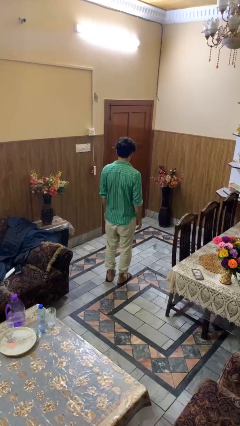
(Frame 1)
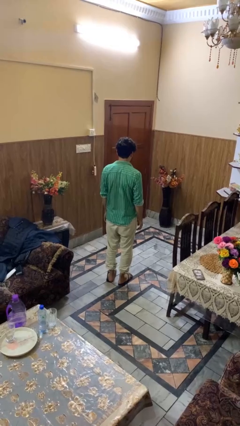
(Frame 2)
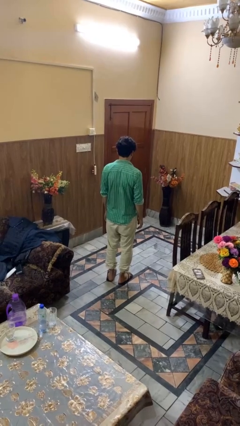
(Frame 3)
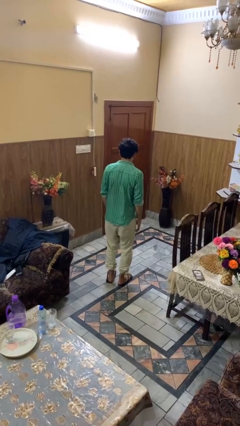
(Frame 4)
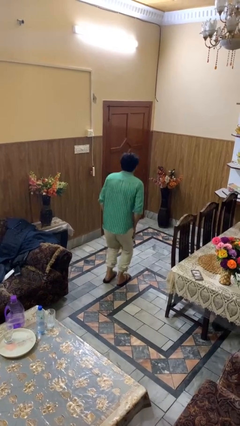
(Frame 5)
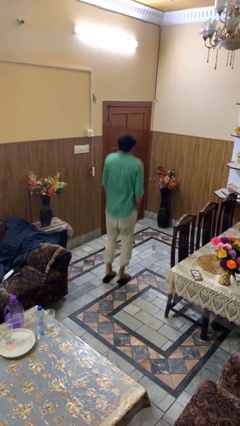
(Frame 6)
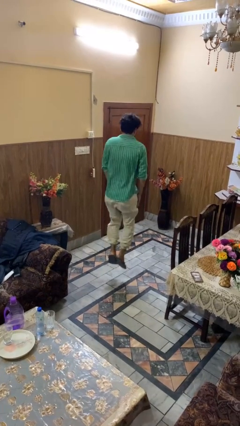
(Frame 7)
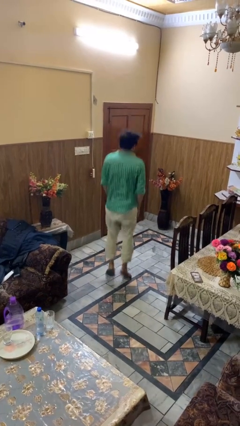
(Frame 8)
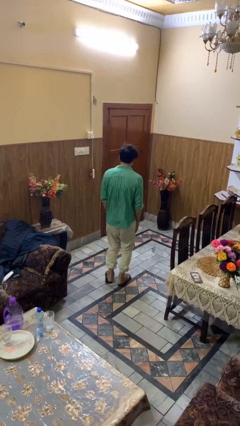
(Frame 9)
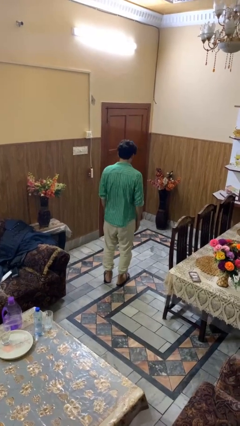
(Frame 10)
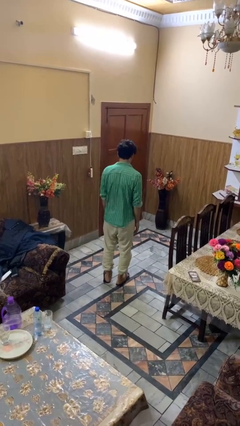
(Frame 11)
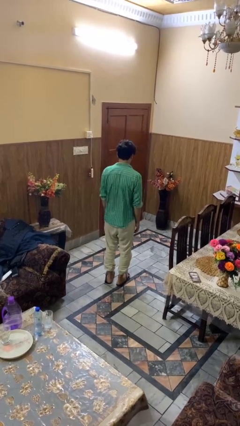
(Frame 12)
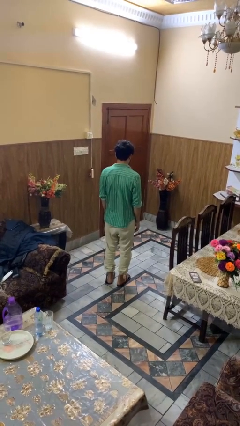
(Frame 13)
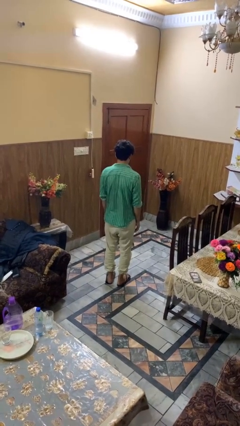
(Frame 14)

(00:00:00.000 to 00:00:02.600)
person jumps

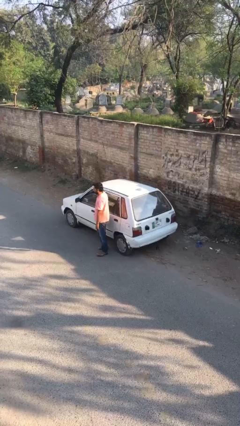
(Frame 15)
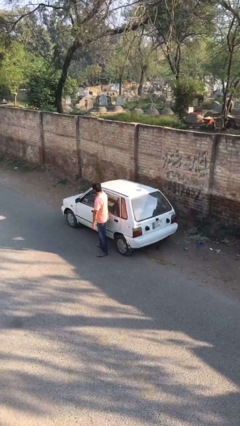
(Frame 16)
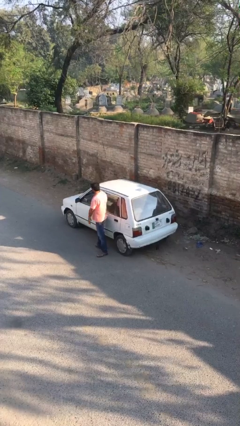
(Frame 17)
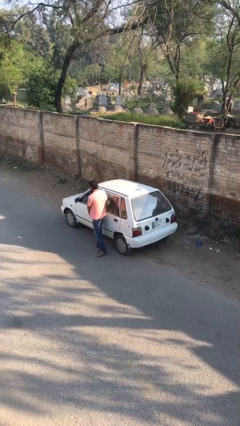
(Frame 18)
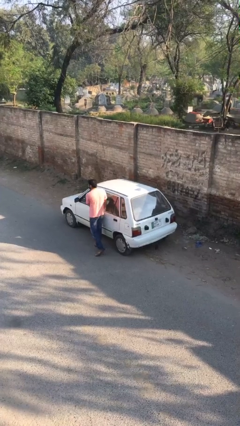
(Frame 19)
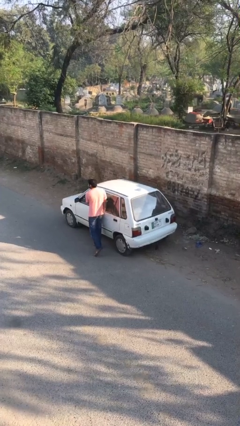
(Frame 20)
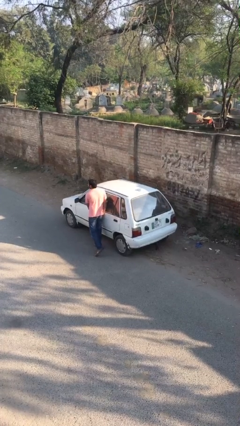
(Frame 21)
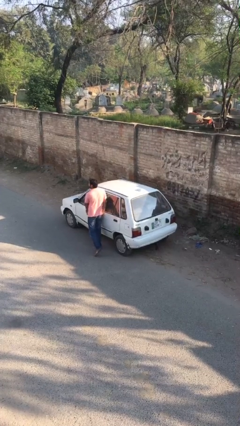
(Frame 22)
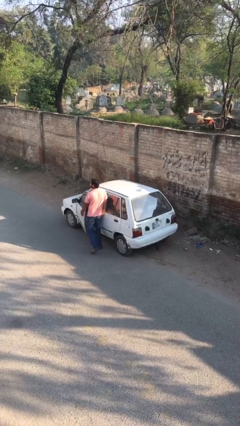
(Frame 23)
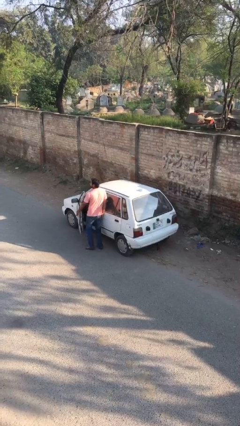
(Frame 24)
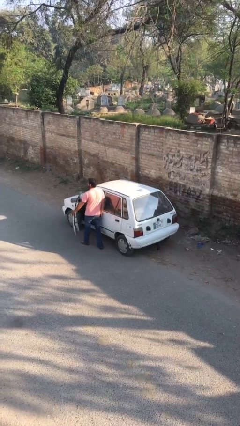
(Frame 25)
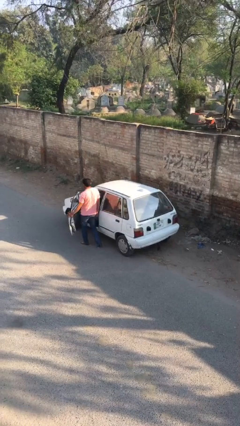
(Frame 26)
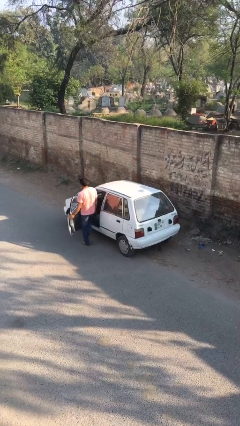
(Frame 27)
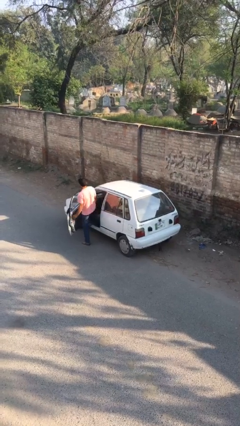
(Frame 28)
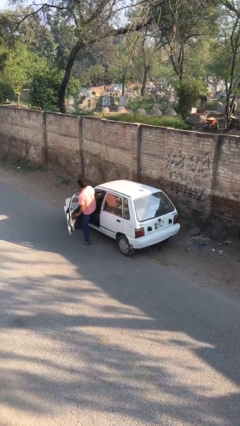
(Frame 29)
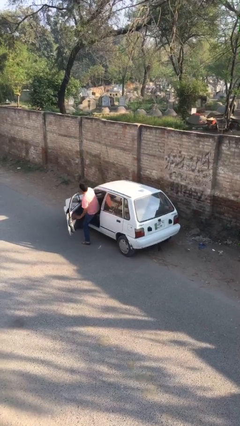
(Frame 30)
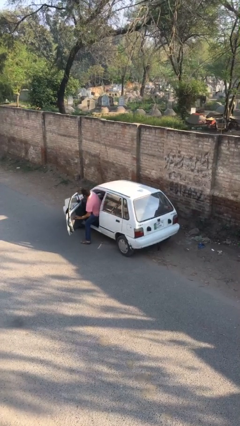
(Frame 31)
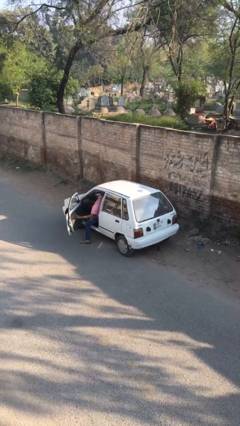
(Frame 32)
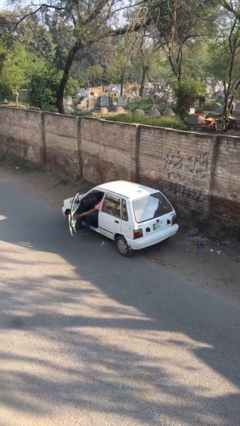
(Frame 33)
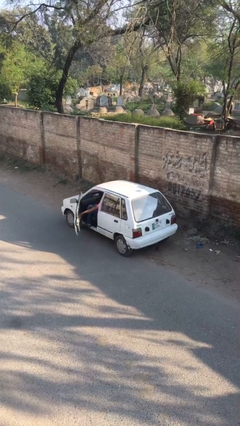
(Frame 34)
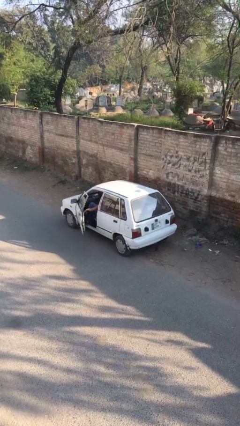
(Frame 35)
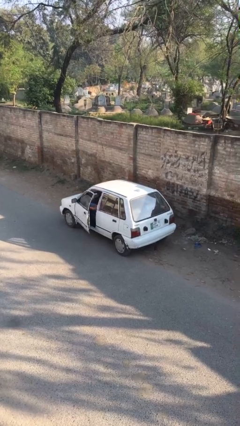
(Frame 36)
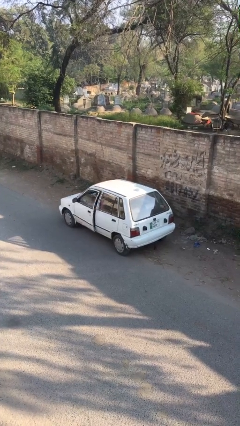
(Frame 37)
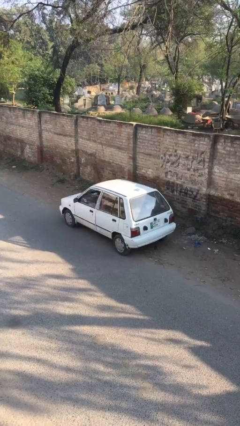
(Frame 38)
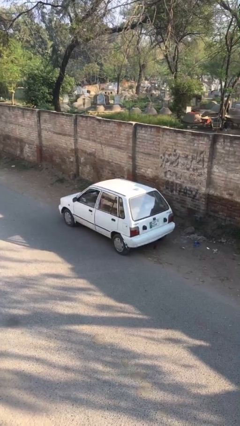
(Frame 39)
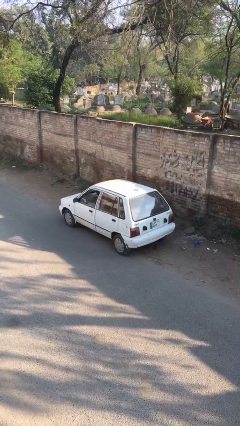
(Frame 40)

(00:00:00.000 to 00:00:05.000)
car picks up person

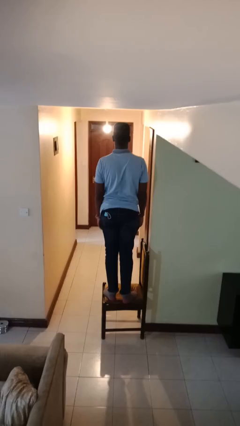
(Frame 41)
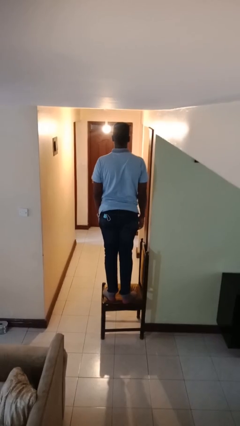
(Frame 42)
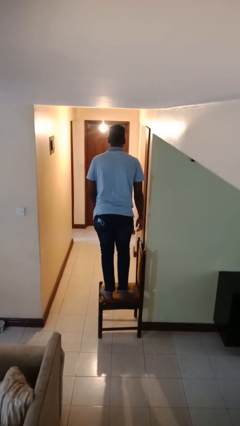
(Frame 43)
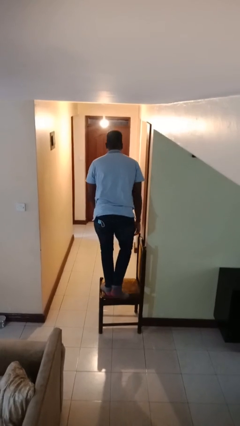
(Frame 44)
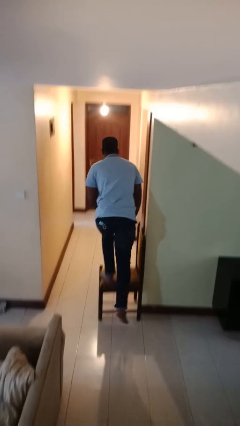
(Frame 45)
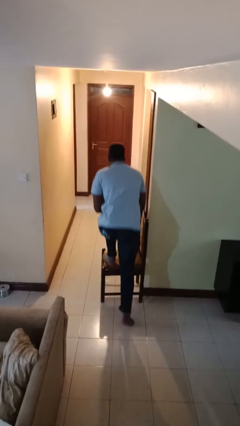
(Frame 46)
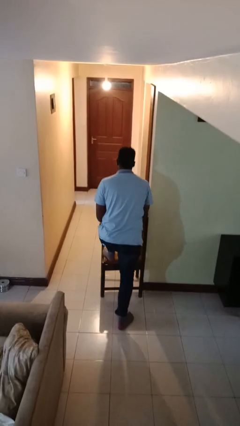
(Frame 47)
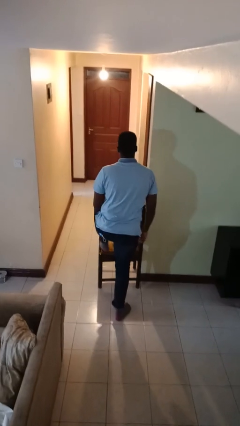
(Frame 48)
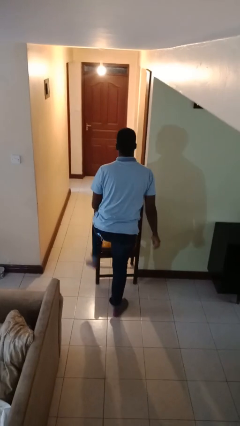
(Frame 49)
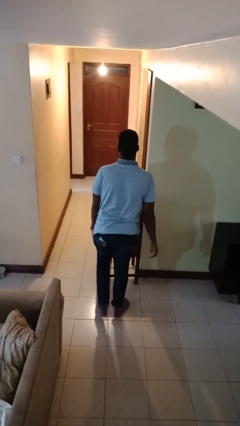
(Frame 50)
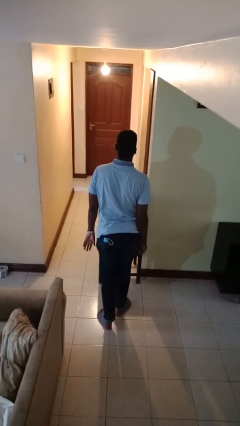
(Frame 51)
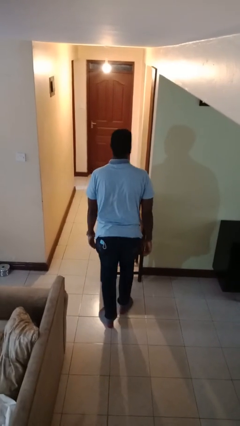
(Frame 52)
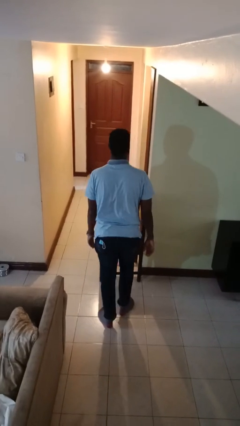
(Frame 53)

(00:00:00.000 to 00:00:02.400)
person climbs off chair

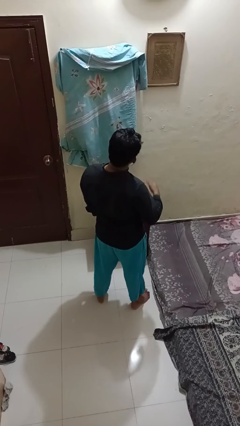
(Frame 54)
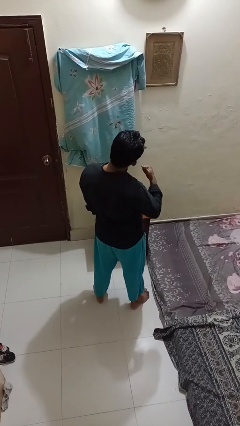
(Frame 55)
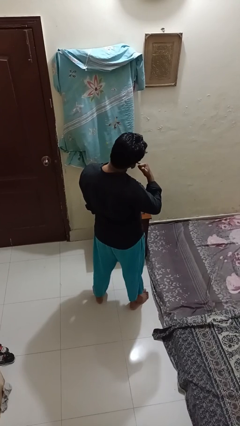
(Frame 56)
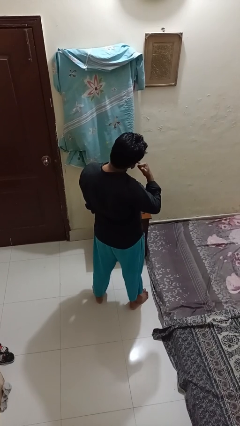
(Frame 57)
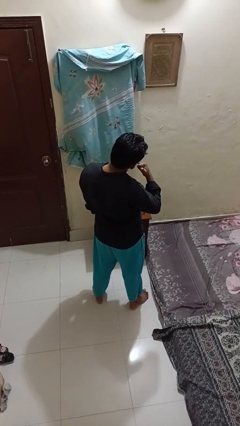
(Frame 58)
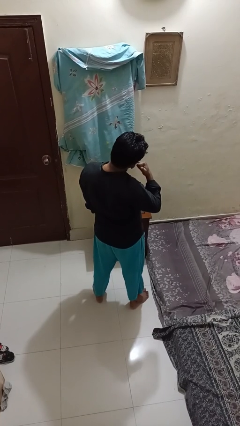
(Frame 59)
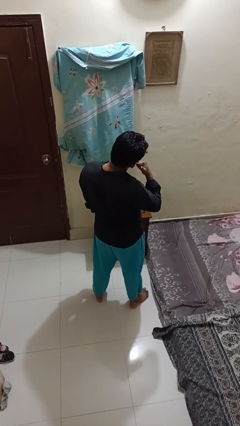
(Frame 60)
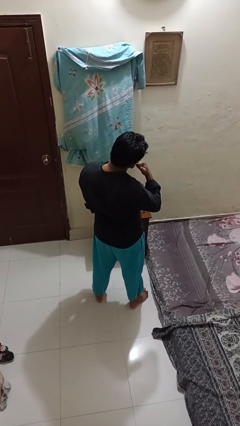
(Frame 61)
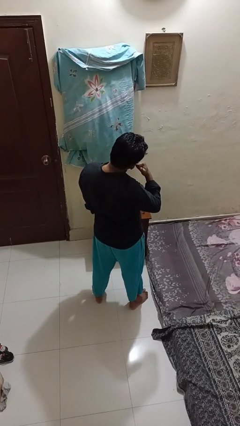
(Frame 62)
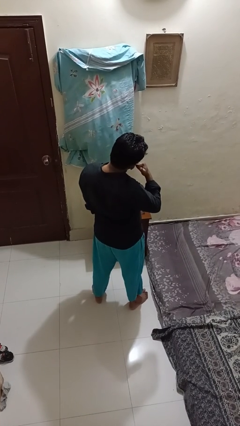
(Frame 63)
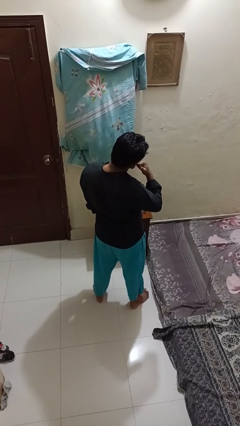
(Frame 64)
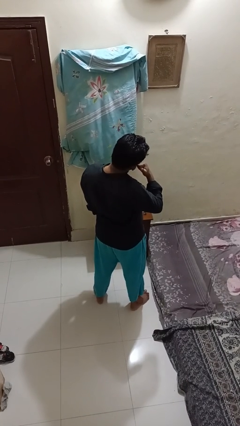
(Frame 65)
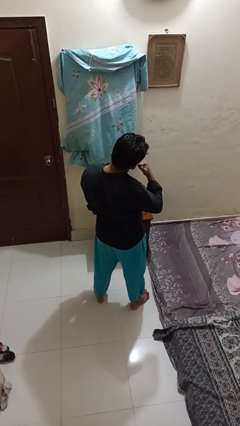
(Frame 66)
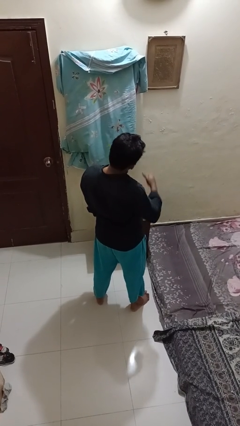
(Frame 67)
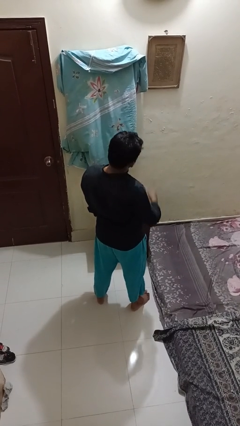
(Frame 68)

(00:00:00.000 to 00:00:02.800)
person gestures call me

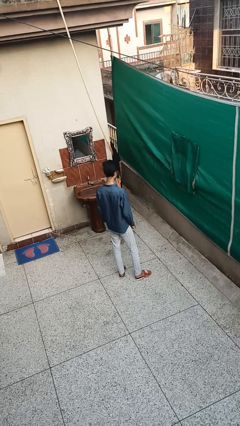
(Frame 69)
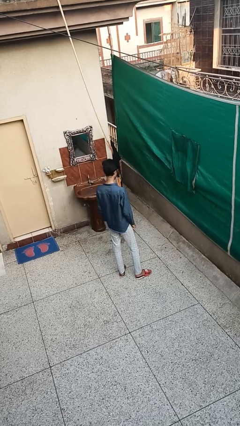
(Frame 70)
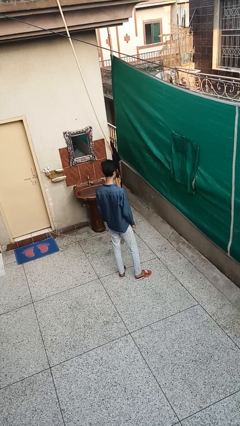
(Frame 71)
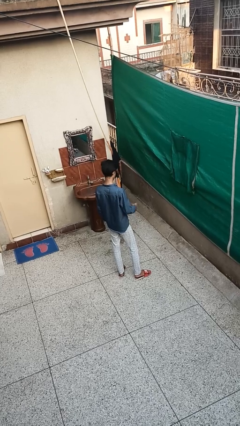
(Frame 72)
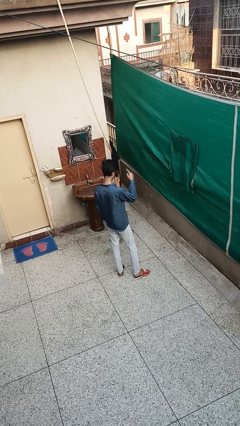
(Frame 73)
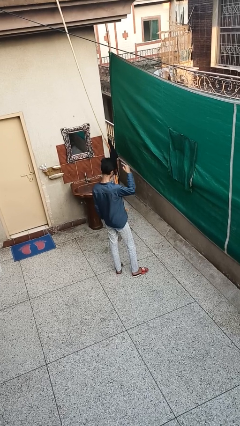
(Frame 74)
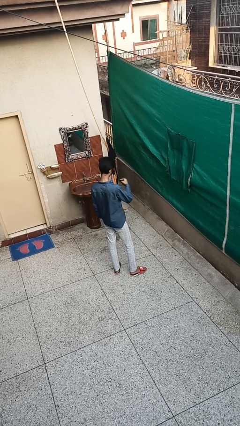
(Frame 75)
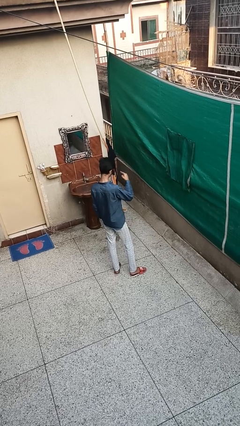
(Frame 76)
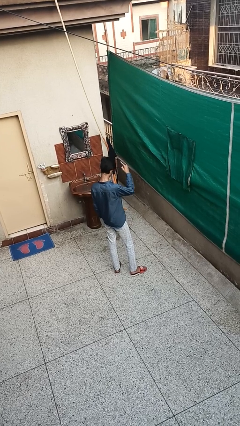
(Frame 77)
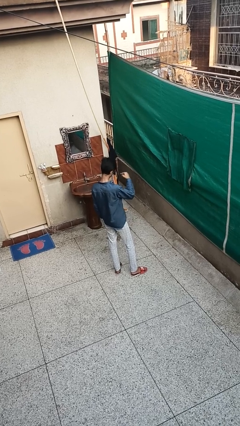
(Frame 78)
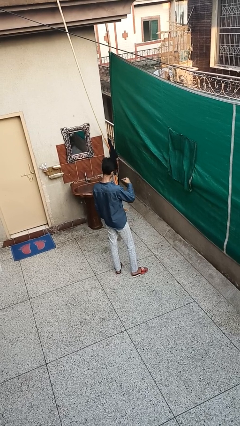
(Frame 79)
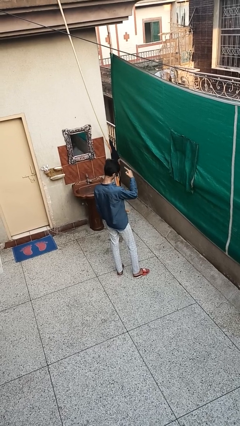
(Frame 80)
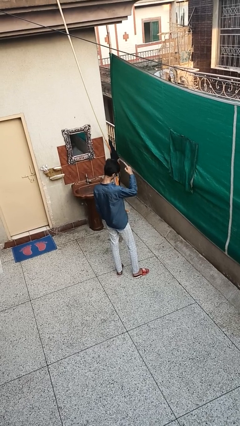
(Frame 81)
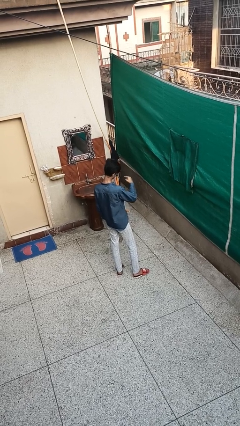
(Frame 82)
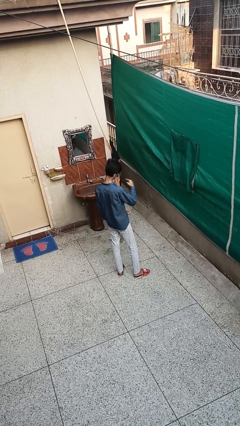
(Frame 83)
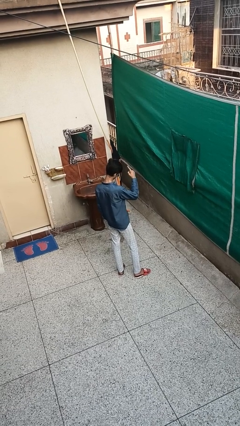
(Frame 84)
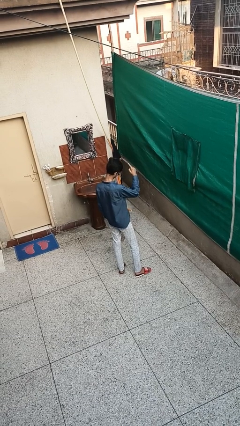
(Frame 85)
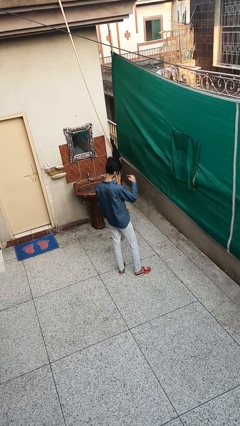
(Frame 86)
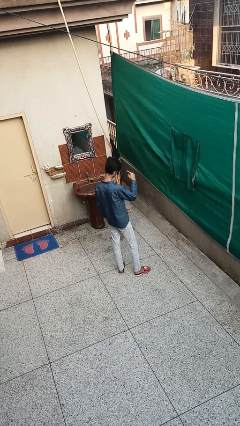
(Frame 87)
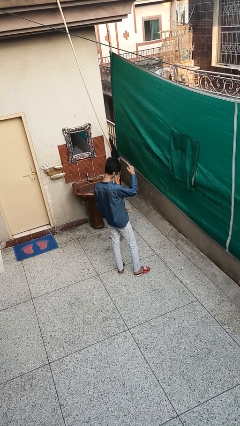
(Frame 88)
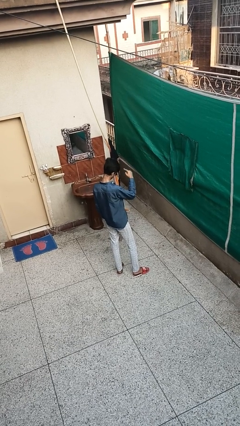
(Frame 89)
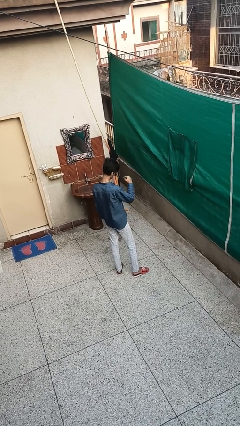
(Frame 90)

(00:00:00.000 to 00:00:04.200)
person gestures swipe down
